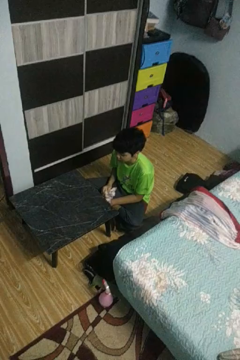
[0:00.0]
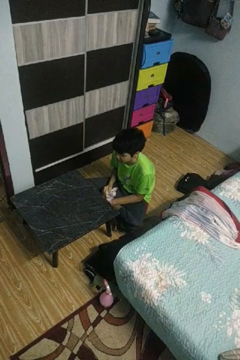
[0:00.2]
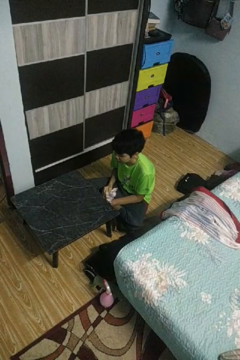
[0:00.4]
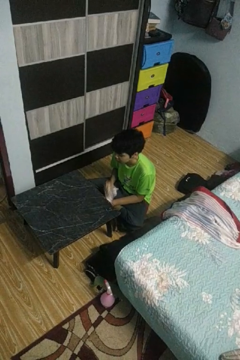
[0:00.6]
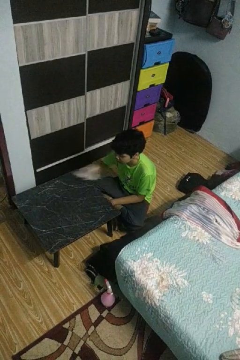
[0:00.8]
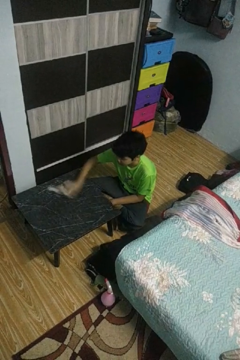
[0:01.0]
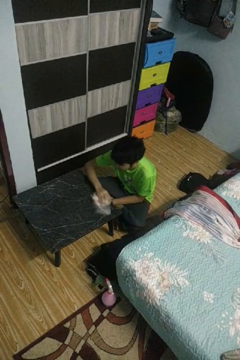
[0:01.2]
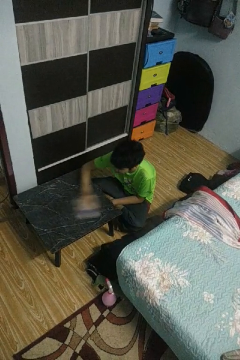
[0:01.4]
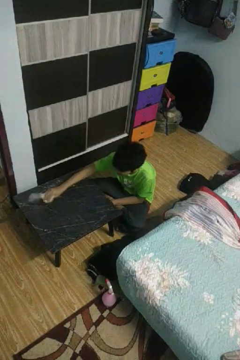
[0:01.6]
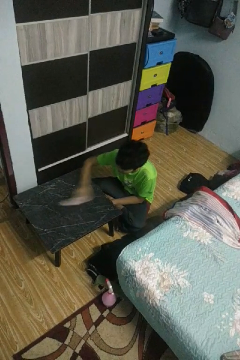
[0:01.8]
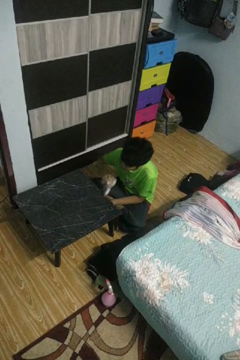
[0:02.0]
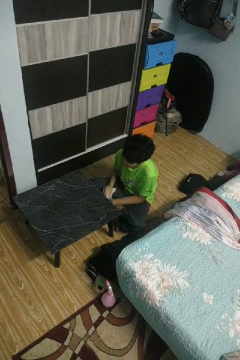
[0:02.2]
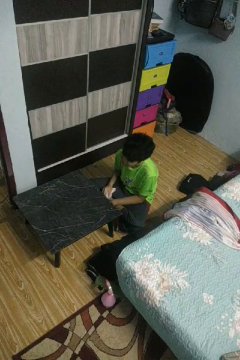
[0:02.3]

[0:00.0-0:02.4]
person cleans table with rag

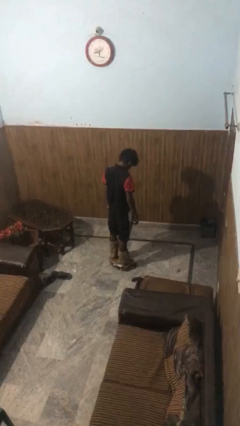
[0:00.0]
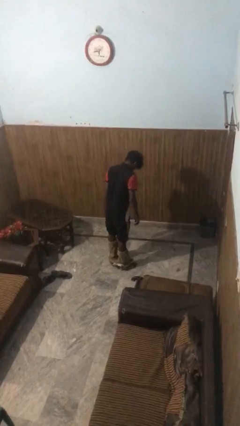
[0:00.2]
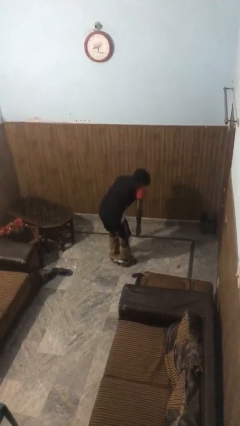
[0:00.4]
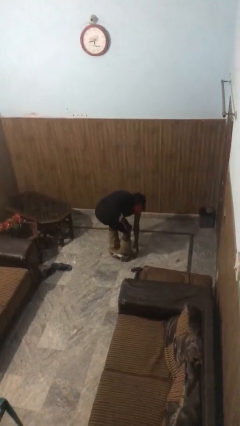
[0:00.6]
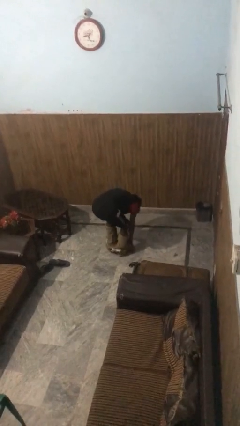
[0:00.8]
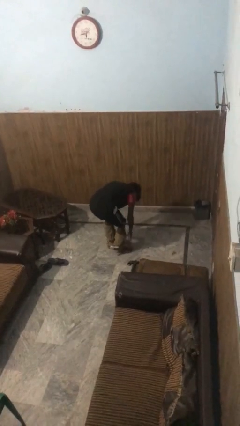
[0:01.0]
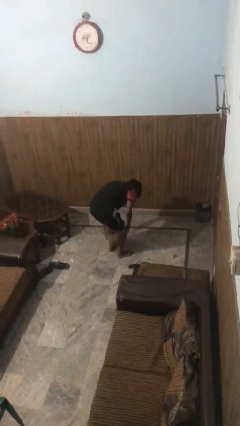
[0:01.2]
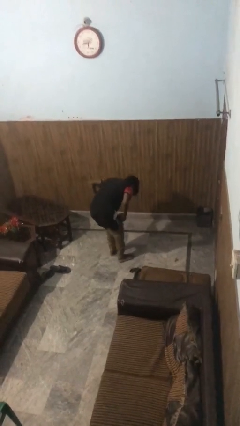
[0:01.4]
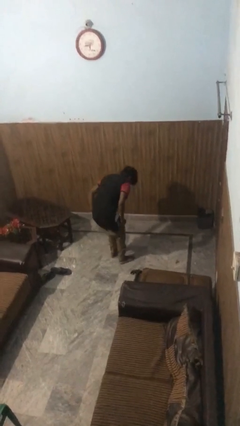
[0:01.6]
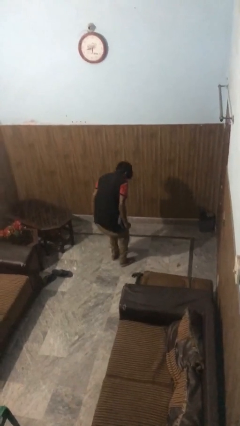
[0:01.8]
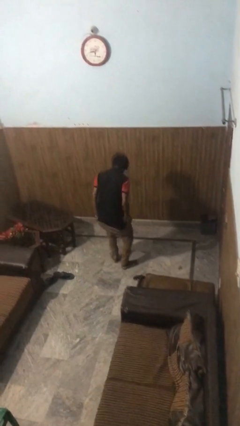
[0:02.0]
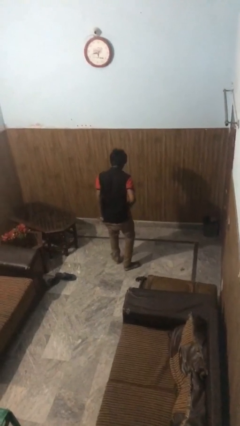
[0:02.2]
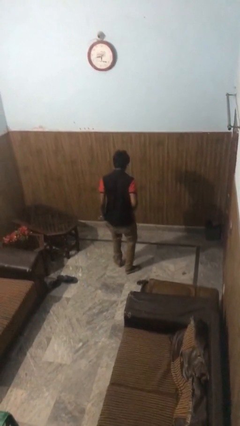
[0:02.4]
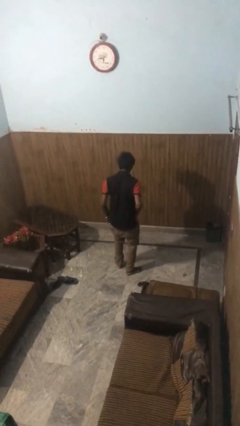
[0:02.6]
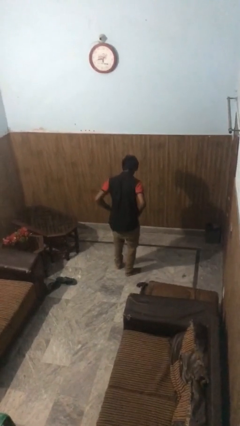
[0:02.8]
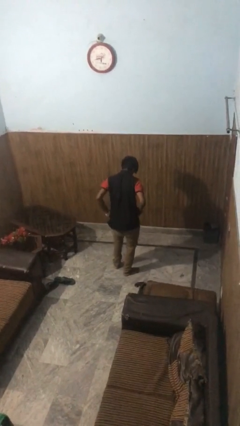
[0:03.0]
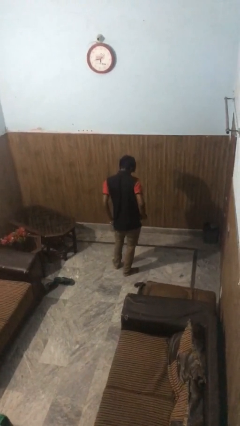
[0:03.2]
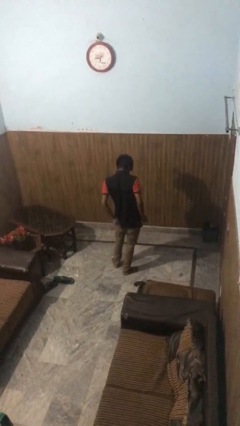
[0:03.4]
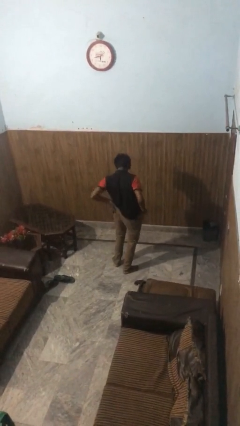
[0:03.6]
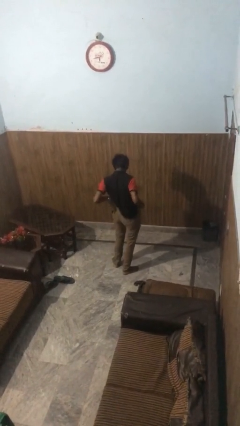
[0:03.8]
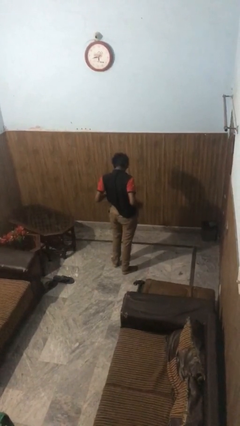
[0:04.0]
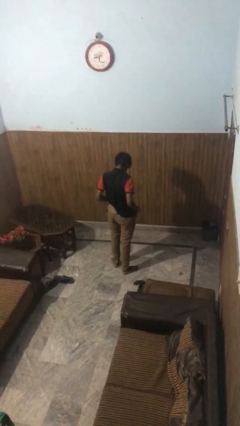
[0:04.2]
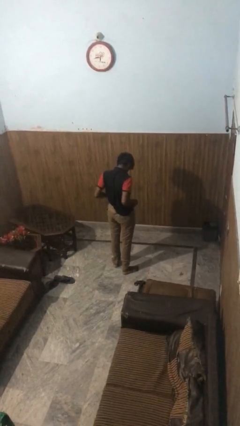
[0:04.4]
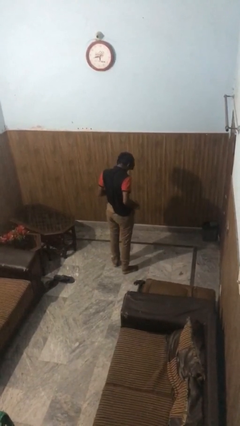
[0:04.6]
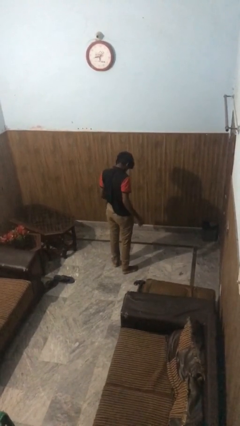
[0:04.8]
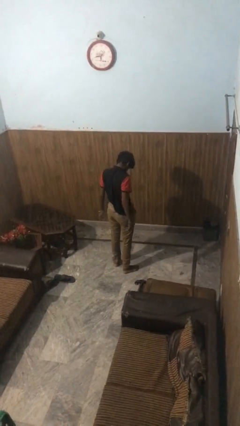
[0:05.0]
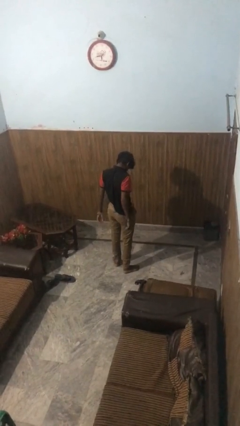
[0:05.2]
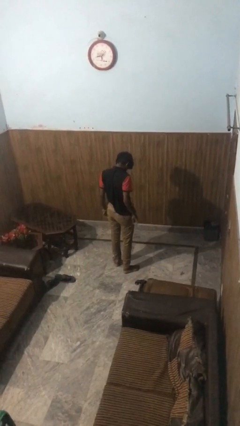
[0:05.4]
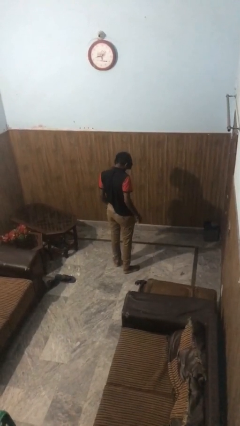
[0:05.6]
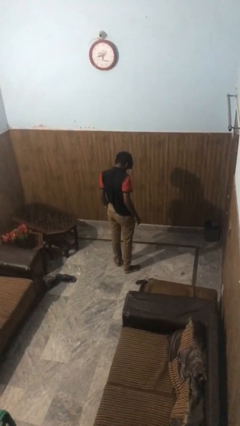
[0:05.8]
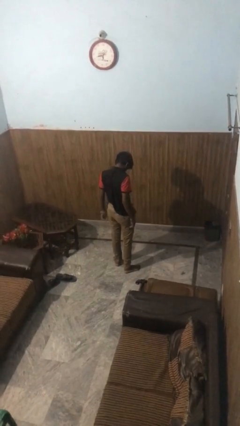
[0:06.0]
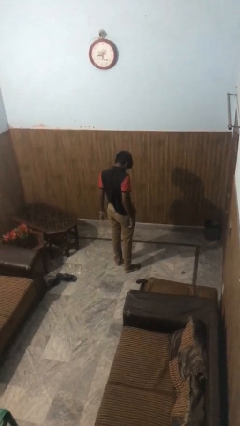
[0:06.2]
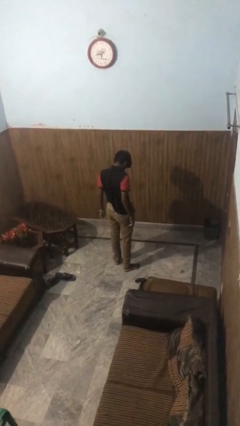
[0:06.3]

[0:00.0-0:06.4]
person puts on pants

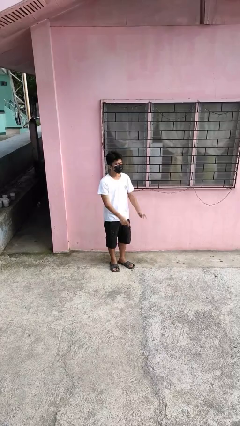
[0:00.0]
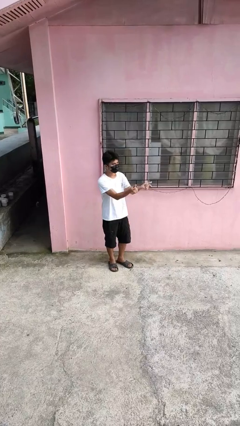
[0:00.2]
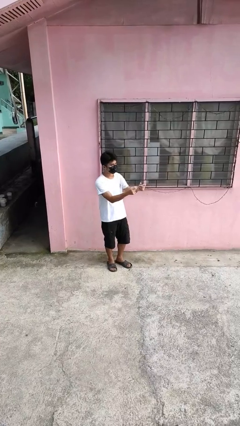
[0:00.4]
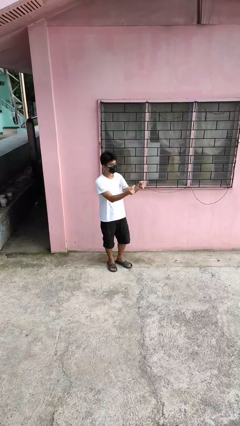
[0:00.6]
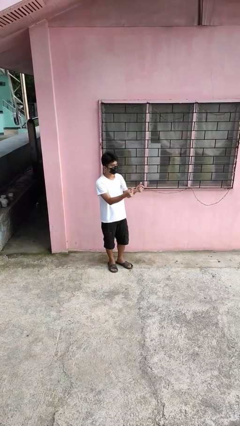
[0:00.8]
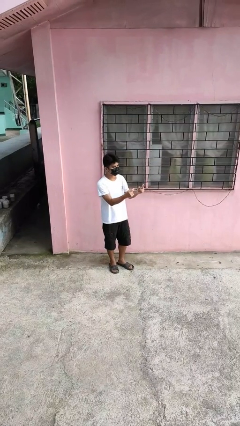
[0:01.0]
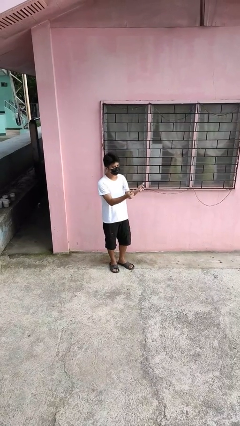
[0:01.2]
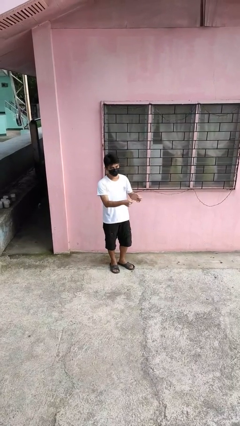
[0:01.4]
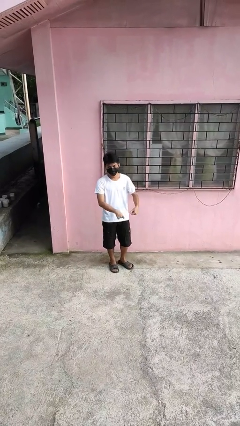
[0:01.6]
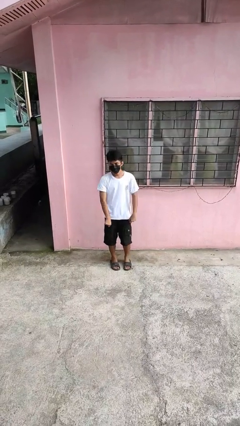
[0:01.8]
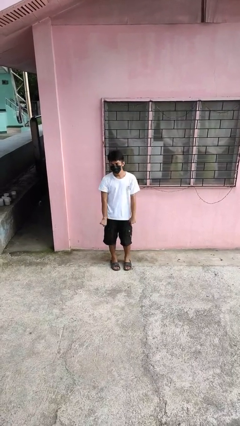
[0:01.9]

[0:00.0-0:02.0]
person snaps fingers

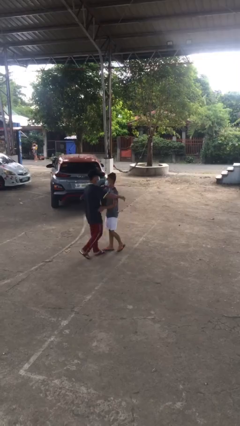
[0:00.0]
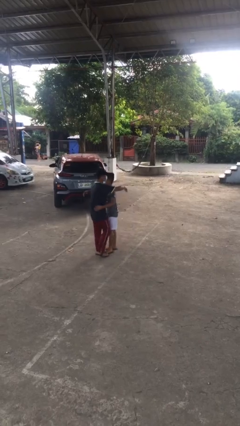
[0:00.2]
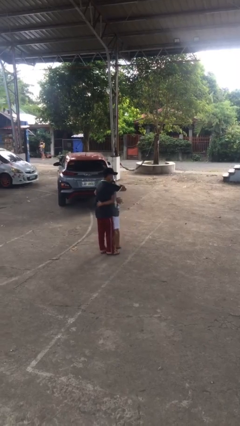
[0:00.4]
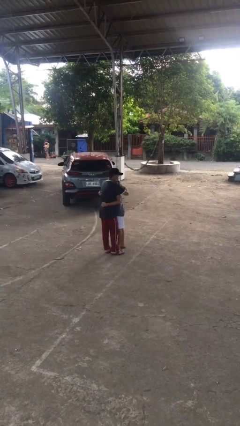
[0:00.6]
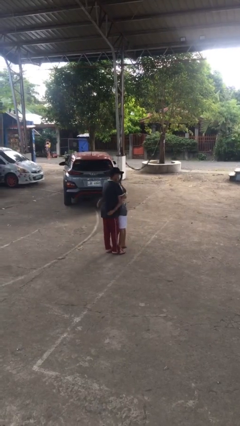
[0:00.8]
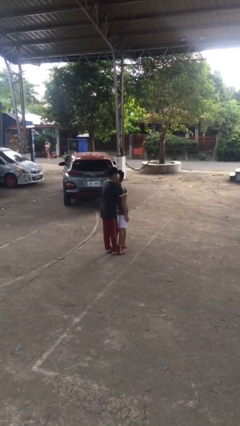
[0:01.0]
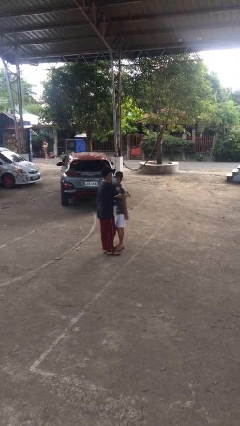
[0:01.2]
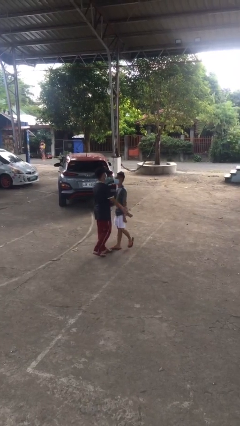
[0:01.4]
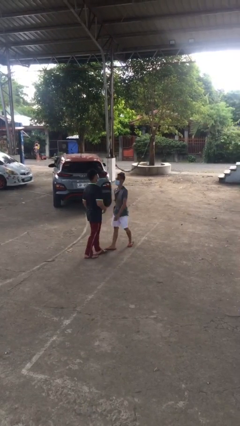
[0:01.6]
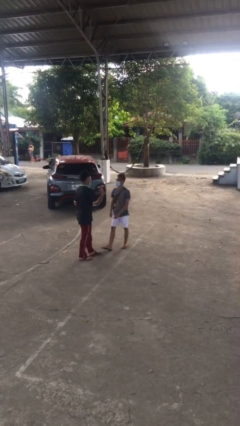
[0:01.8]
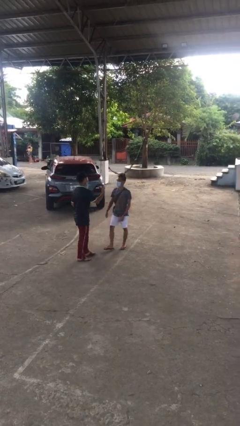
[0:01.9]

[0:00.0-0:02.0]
person embraces person

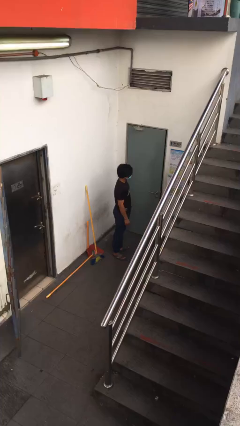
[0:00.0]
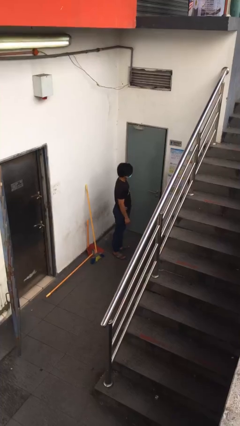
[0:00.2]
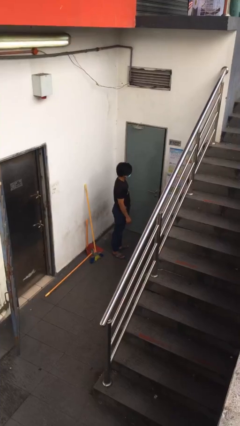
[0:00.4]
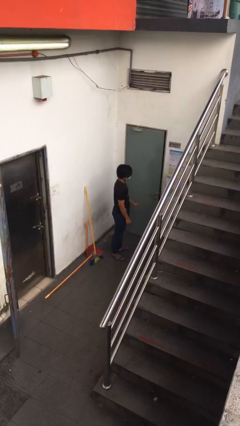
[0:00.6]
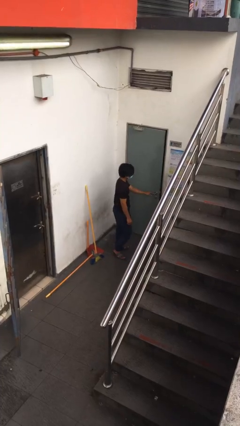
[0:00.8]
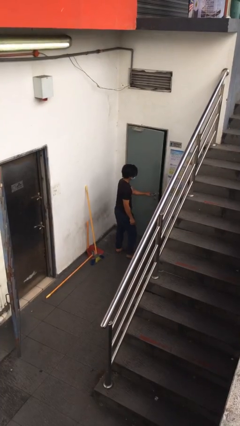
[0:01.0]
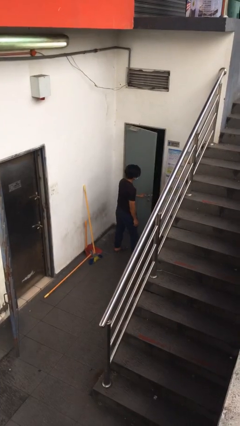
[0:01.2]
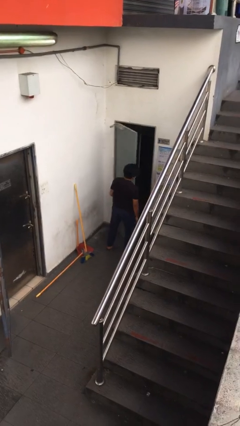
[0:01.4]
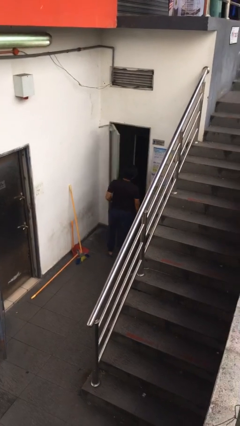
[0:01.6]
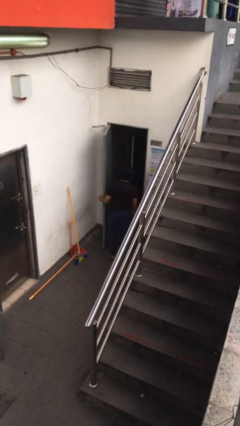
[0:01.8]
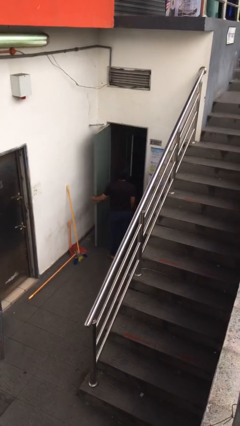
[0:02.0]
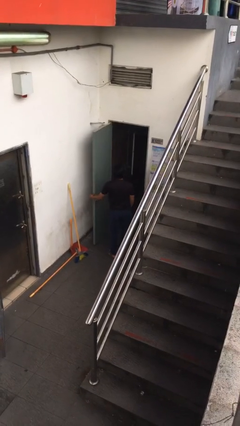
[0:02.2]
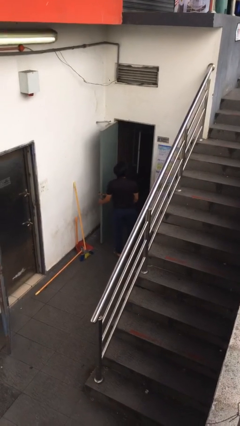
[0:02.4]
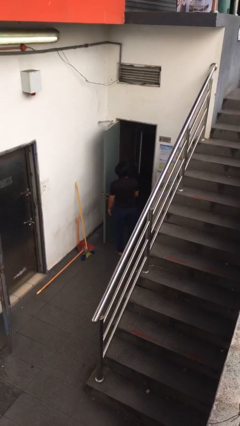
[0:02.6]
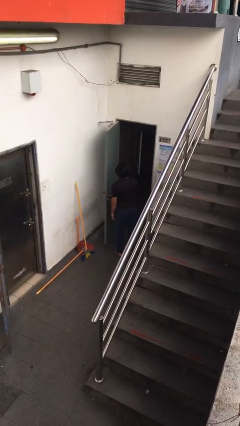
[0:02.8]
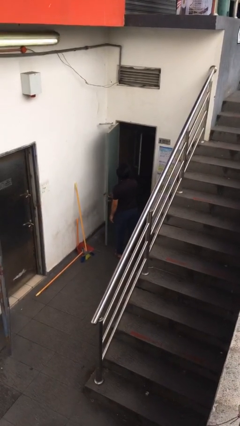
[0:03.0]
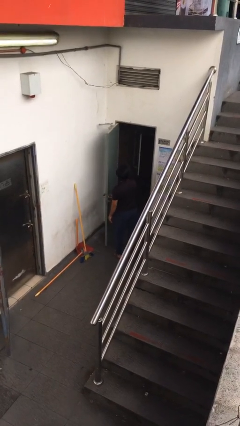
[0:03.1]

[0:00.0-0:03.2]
person opens facility door

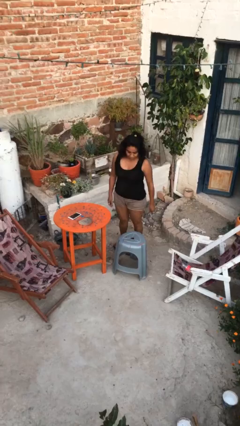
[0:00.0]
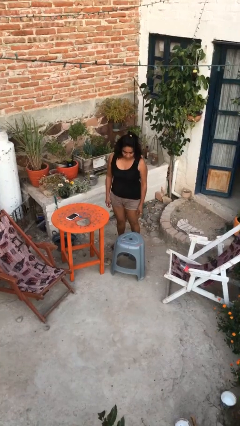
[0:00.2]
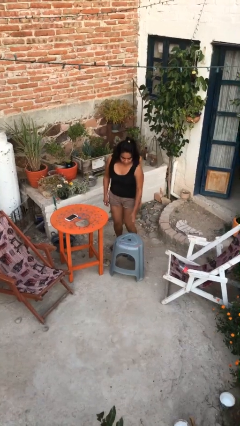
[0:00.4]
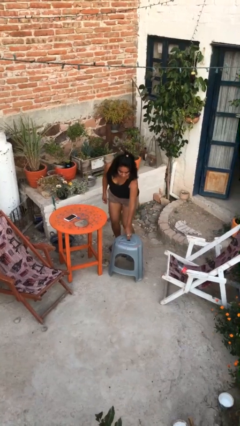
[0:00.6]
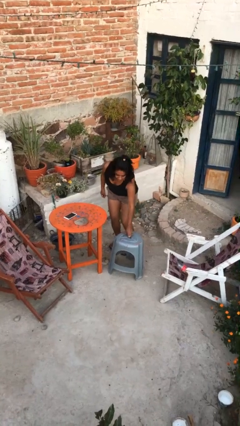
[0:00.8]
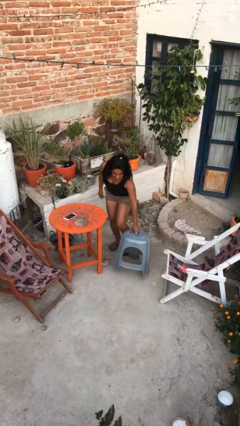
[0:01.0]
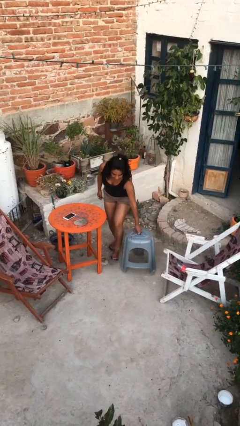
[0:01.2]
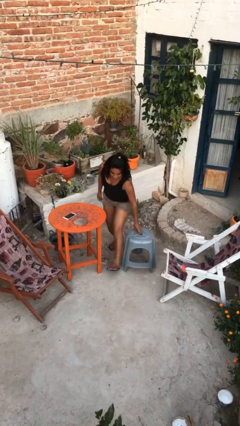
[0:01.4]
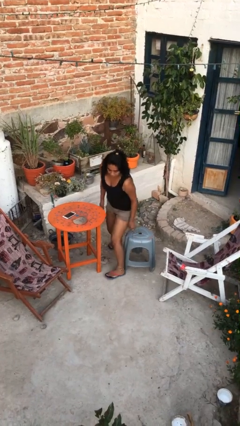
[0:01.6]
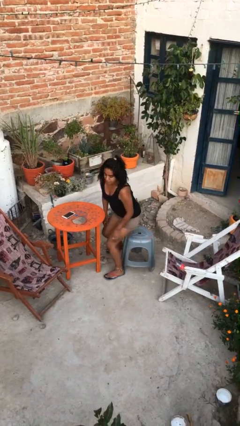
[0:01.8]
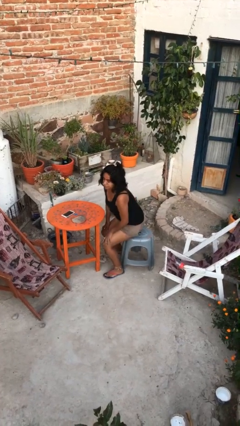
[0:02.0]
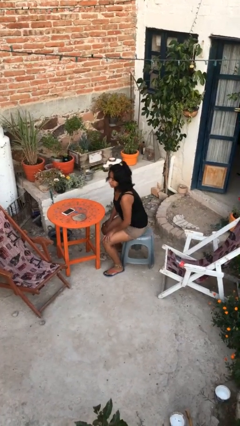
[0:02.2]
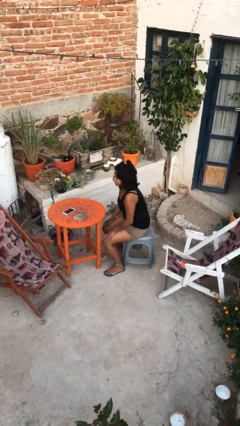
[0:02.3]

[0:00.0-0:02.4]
person sits down
